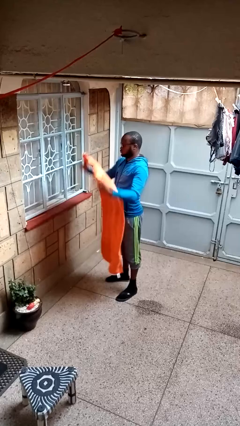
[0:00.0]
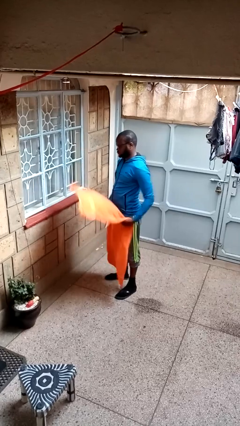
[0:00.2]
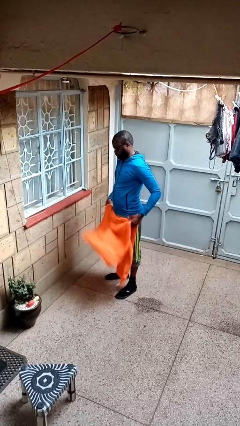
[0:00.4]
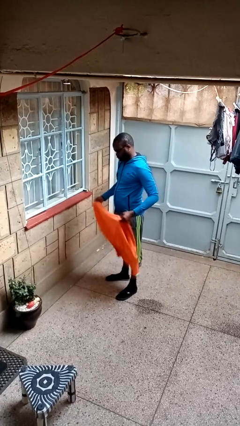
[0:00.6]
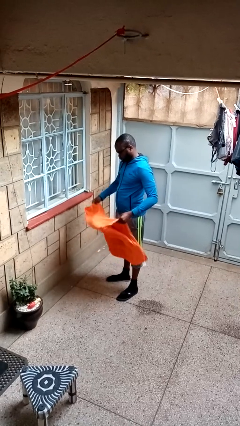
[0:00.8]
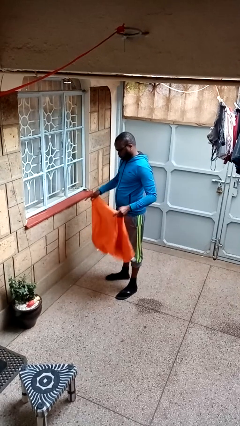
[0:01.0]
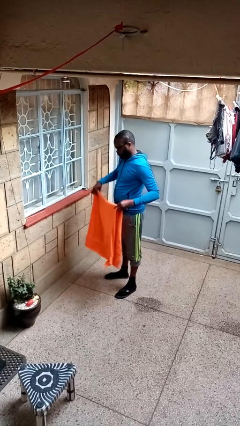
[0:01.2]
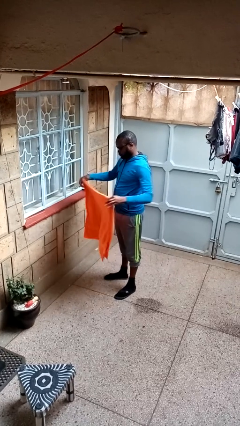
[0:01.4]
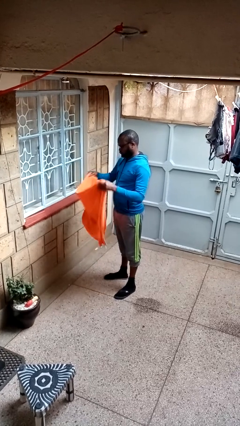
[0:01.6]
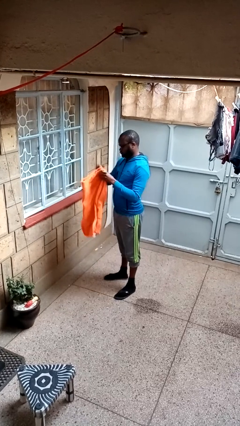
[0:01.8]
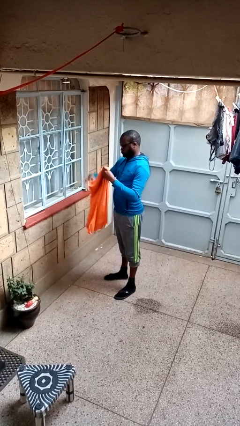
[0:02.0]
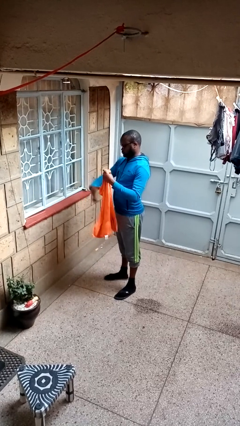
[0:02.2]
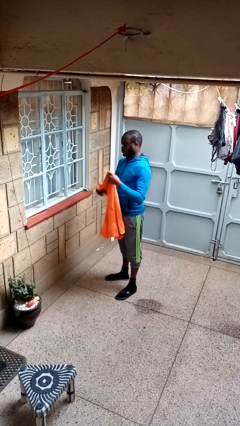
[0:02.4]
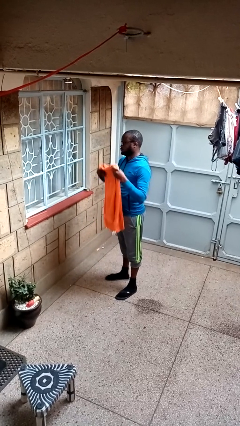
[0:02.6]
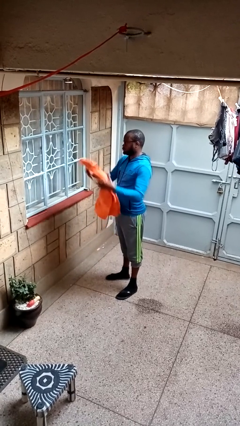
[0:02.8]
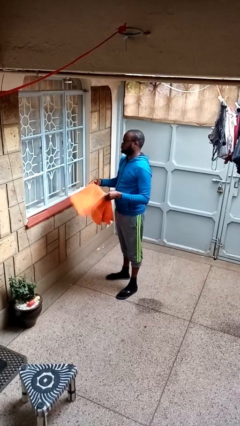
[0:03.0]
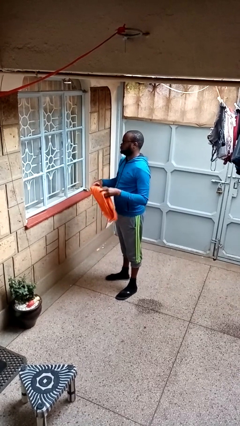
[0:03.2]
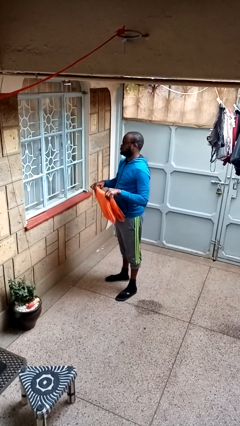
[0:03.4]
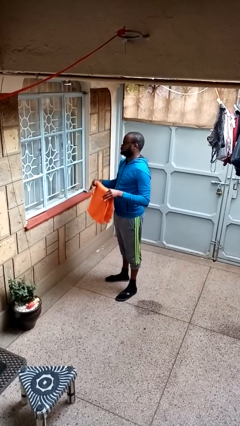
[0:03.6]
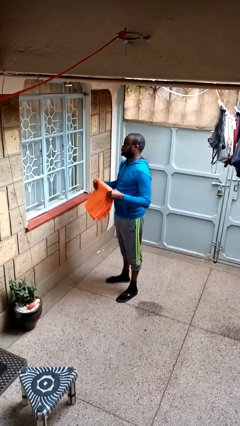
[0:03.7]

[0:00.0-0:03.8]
person folds towel

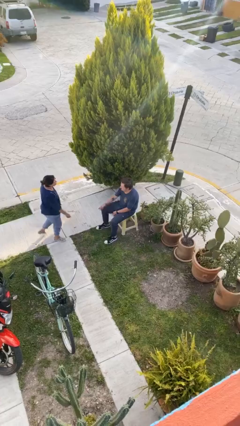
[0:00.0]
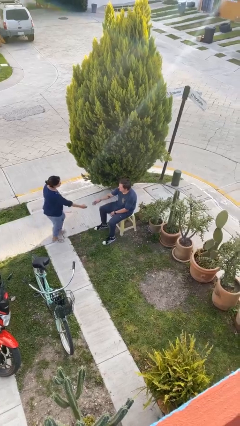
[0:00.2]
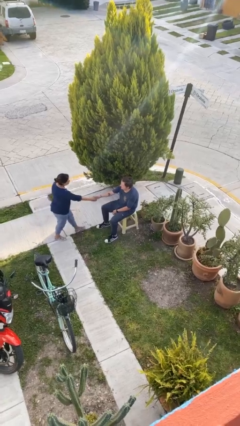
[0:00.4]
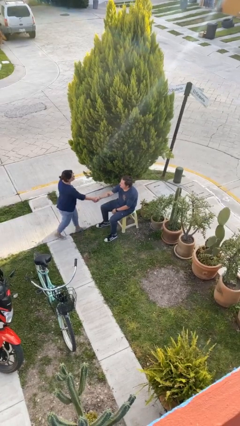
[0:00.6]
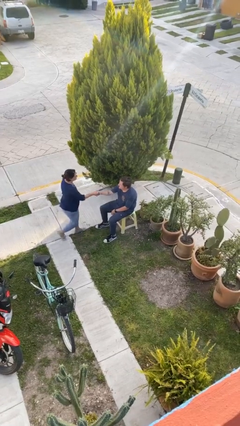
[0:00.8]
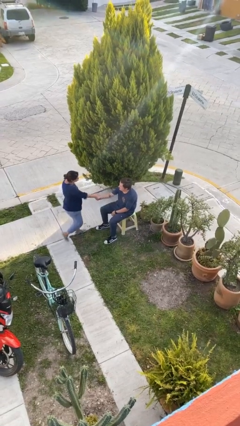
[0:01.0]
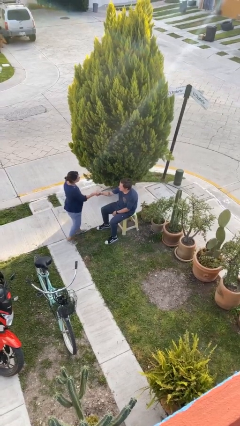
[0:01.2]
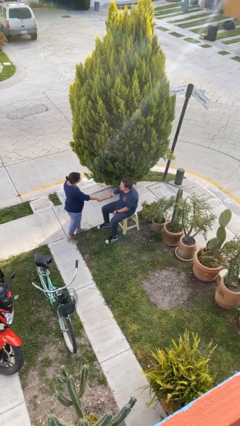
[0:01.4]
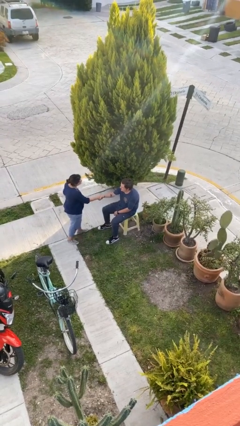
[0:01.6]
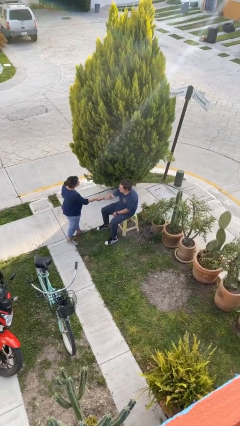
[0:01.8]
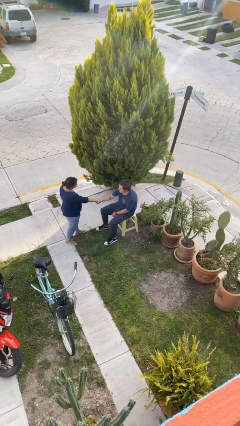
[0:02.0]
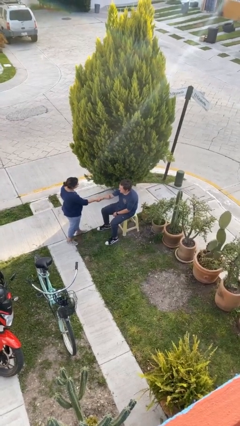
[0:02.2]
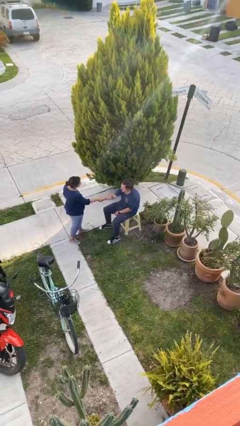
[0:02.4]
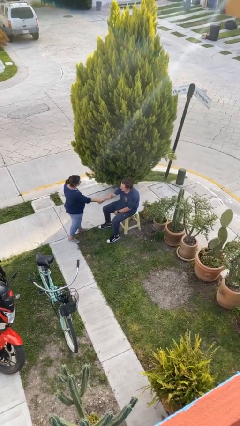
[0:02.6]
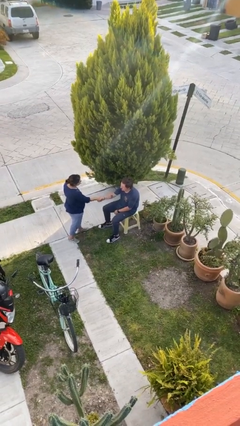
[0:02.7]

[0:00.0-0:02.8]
person shakes hand

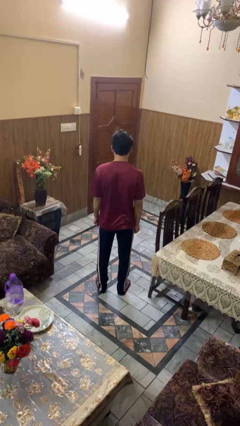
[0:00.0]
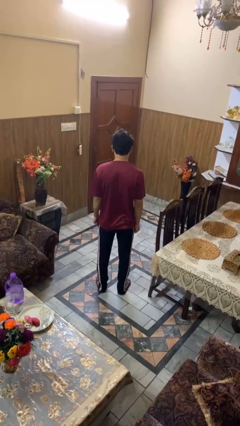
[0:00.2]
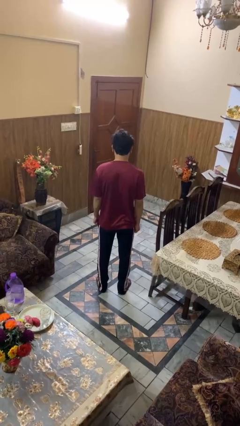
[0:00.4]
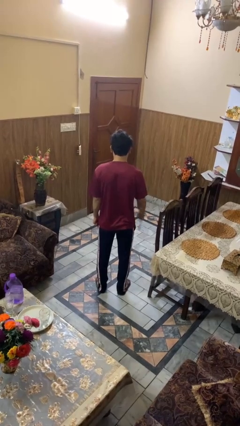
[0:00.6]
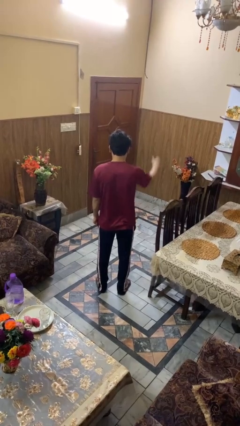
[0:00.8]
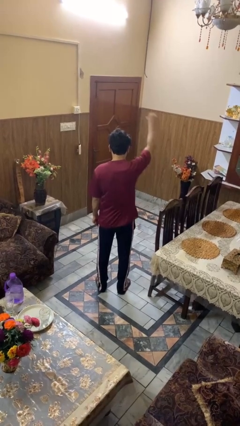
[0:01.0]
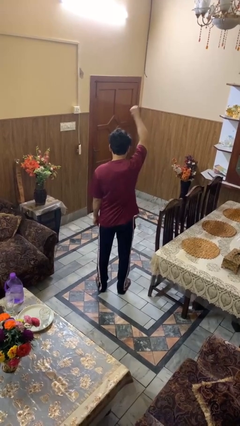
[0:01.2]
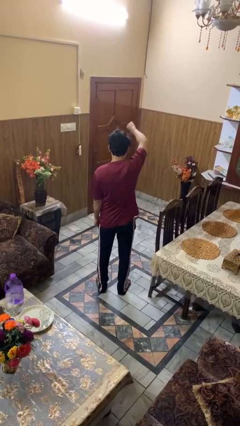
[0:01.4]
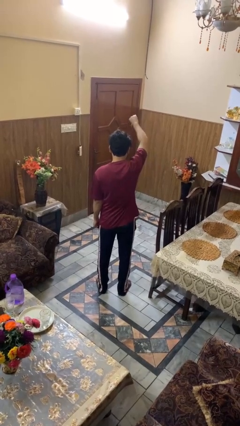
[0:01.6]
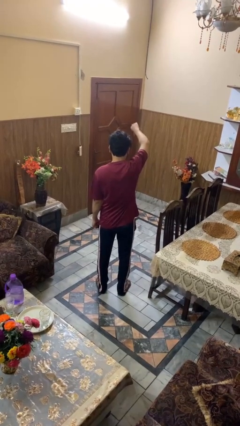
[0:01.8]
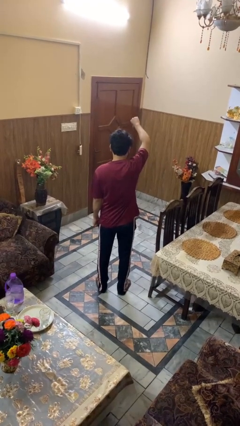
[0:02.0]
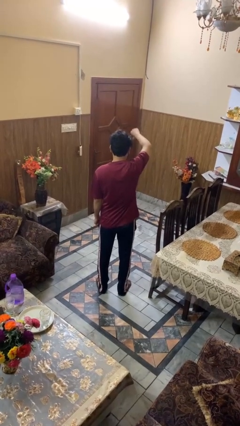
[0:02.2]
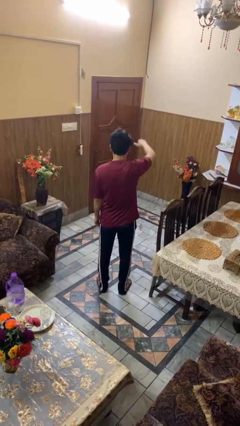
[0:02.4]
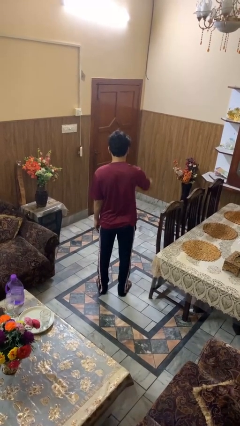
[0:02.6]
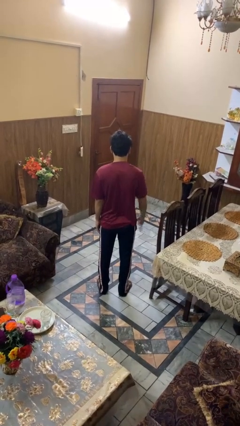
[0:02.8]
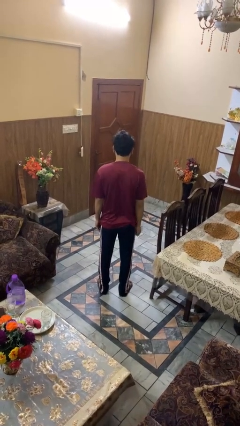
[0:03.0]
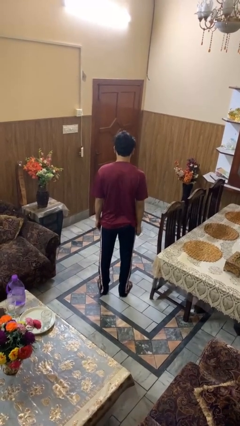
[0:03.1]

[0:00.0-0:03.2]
person gestures thumbs down

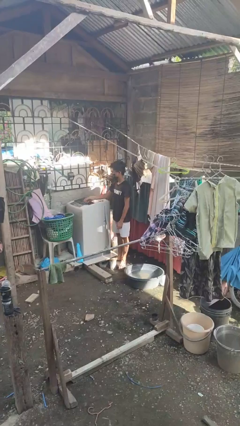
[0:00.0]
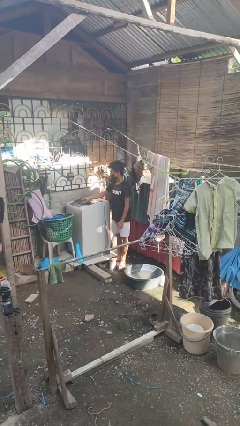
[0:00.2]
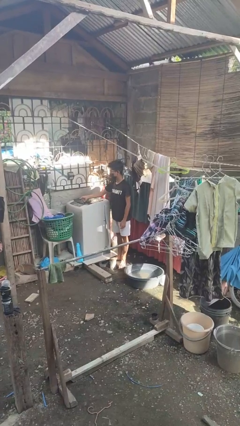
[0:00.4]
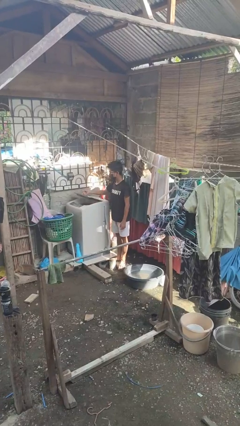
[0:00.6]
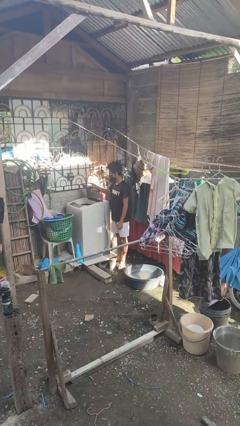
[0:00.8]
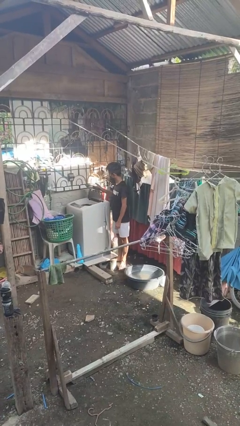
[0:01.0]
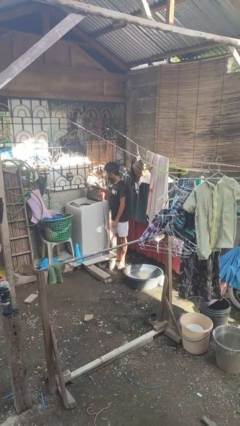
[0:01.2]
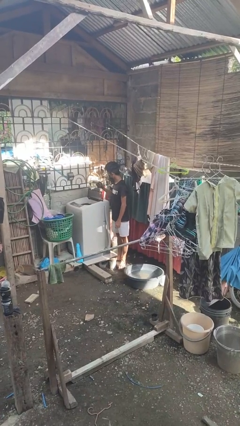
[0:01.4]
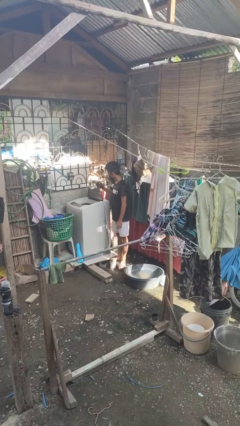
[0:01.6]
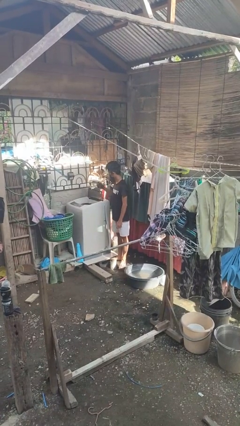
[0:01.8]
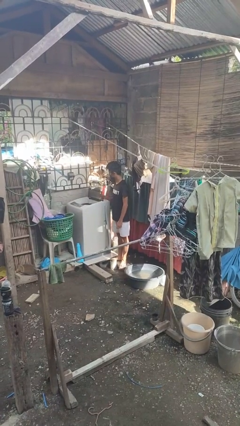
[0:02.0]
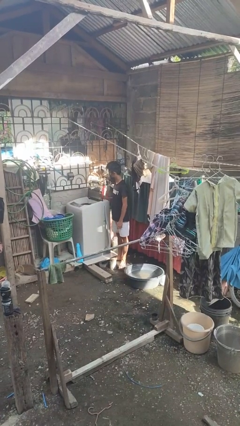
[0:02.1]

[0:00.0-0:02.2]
person opens clothes washer

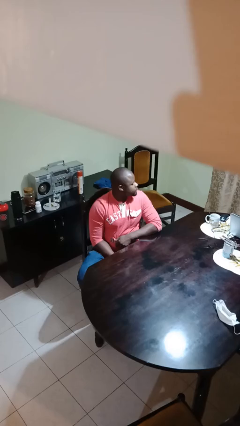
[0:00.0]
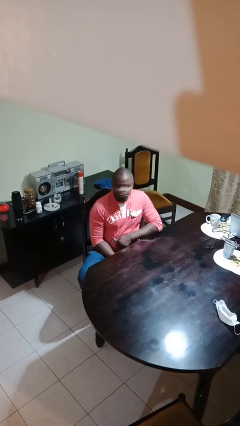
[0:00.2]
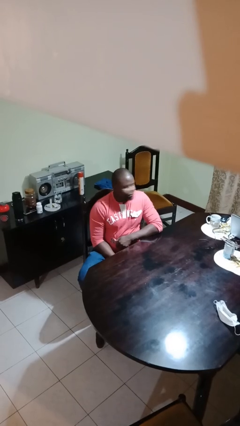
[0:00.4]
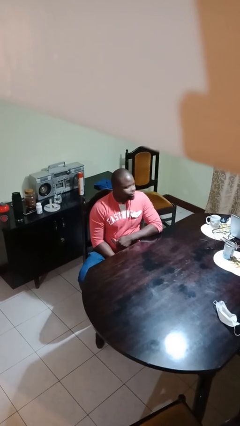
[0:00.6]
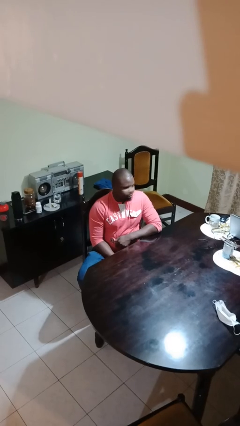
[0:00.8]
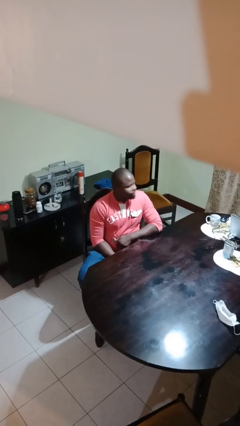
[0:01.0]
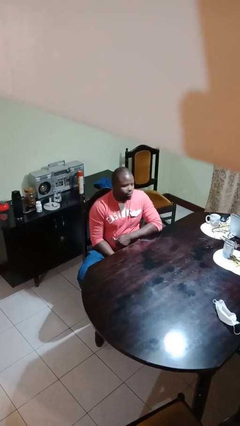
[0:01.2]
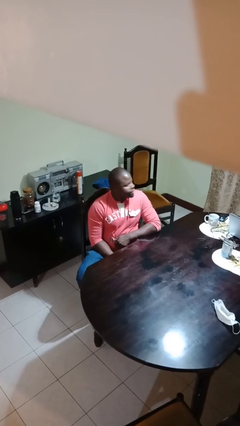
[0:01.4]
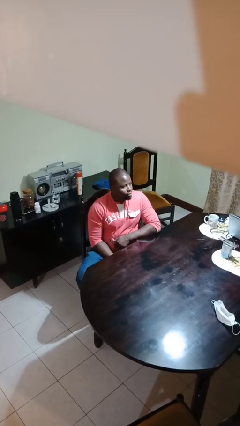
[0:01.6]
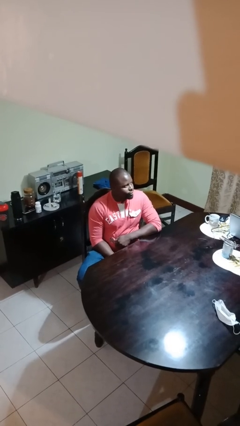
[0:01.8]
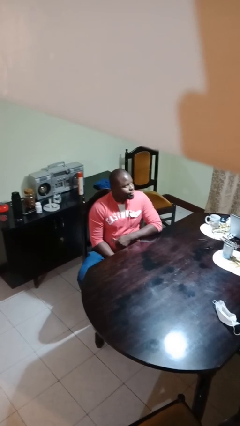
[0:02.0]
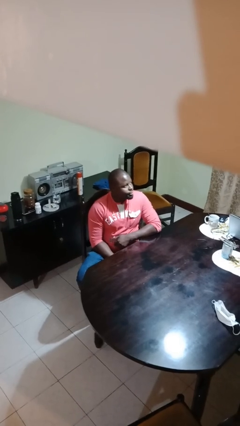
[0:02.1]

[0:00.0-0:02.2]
person shakes head

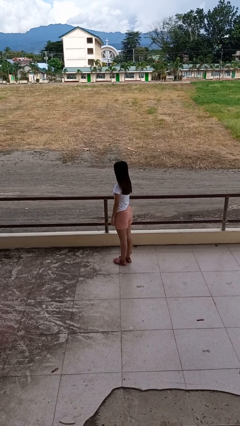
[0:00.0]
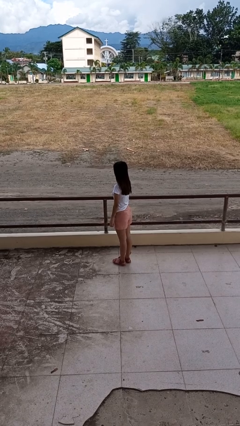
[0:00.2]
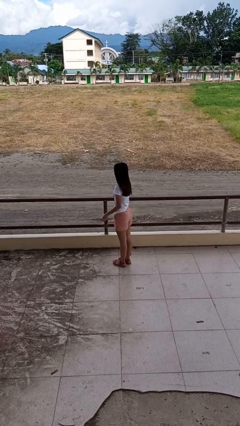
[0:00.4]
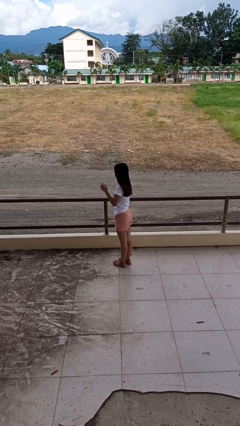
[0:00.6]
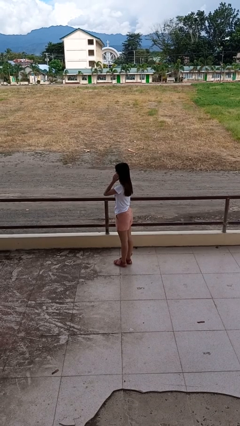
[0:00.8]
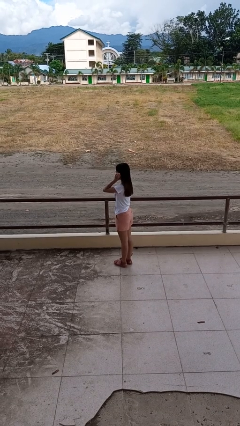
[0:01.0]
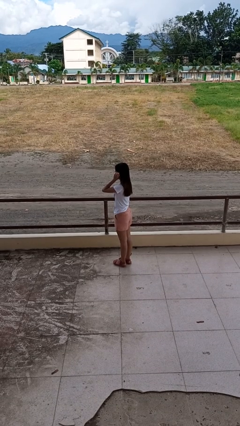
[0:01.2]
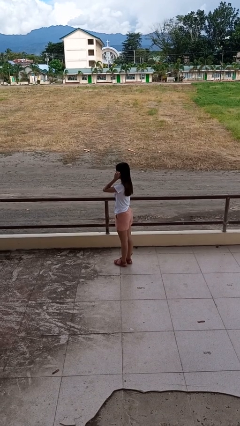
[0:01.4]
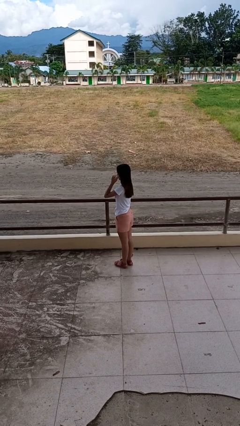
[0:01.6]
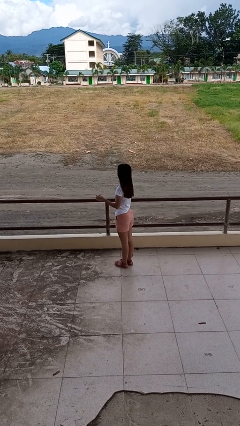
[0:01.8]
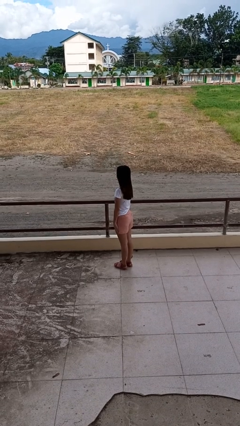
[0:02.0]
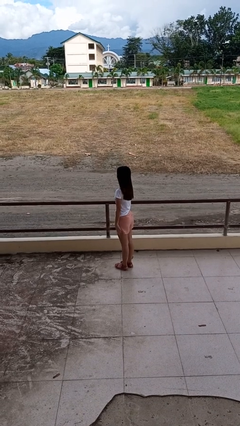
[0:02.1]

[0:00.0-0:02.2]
person touches earlobe

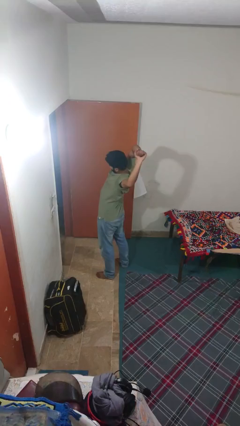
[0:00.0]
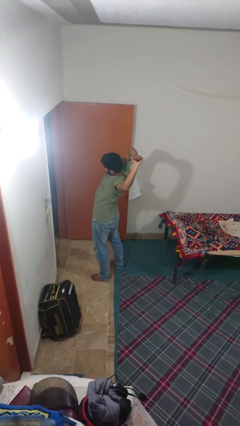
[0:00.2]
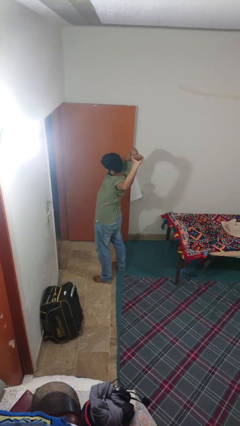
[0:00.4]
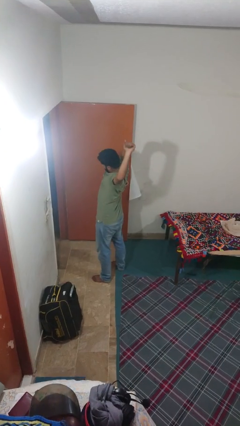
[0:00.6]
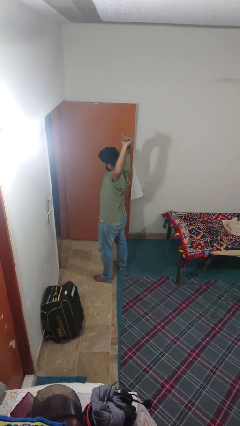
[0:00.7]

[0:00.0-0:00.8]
person stretches arms over head

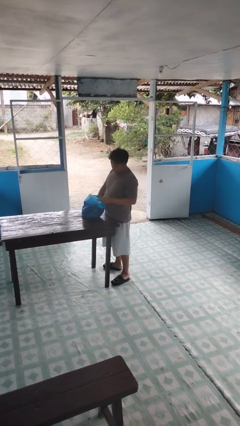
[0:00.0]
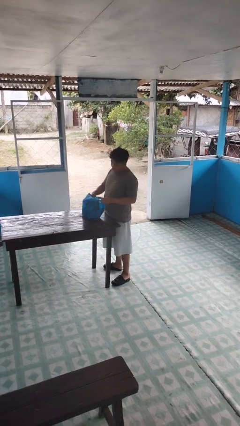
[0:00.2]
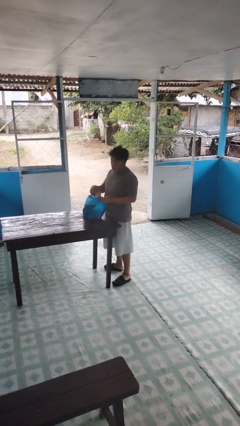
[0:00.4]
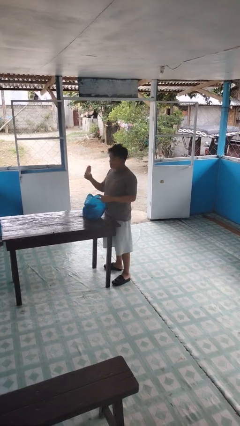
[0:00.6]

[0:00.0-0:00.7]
person takes object from bag
